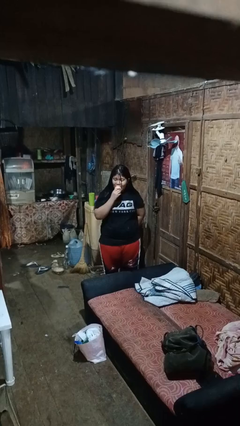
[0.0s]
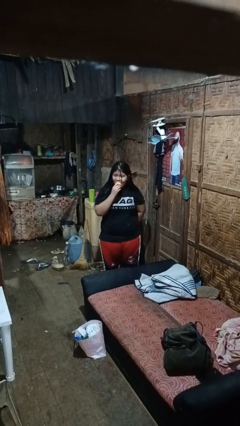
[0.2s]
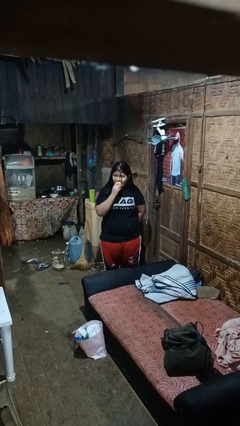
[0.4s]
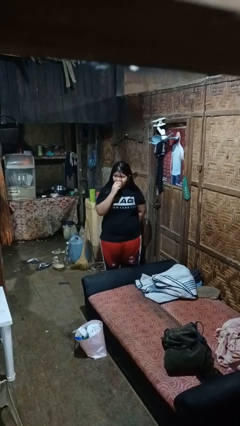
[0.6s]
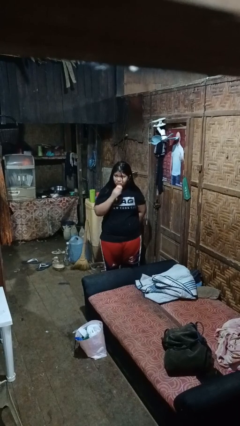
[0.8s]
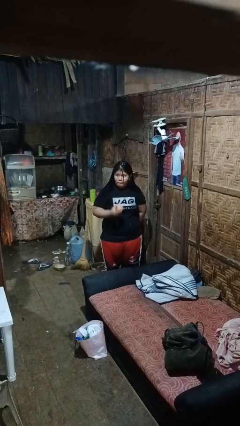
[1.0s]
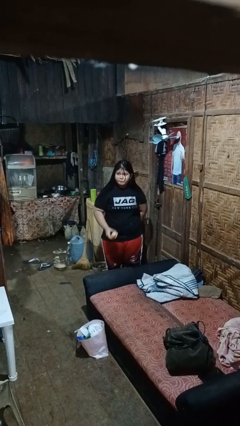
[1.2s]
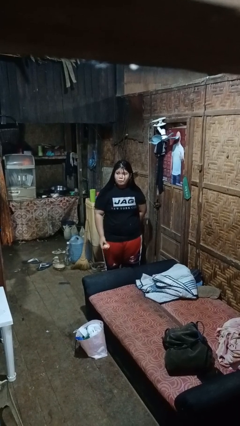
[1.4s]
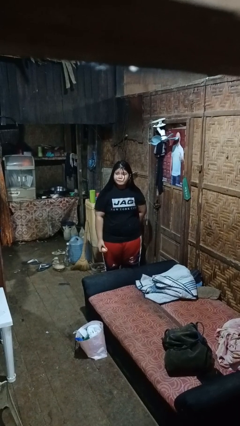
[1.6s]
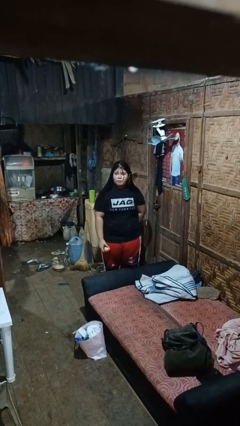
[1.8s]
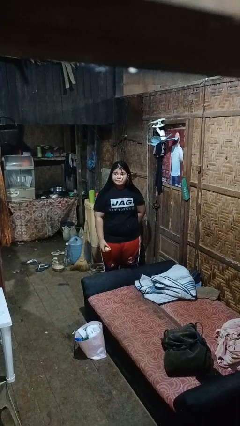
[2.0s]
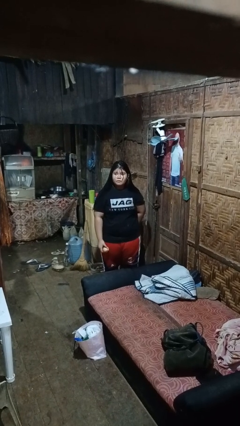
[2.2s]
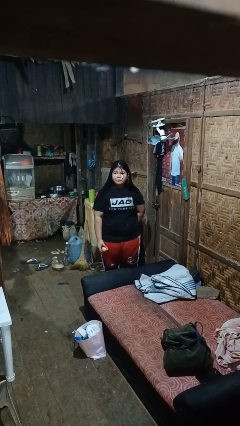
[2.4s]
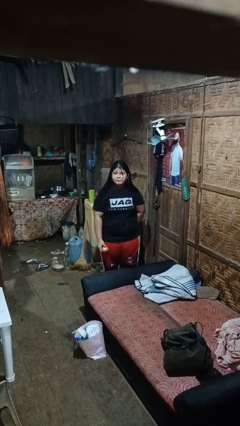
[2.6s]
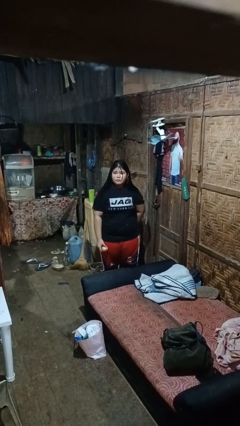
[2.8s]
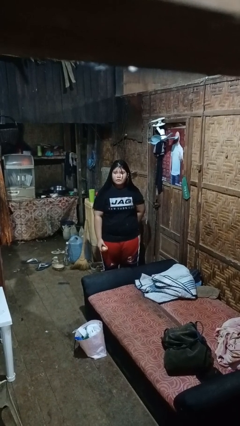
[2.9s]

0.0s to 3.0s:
person eats apple

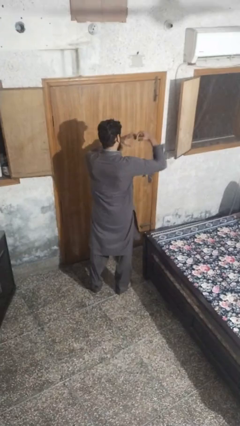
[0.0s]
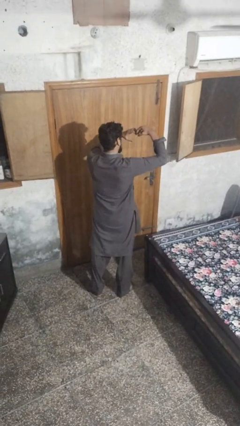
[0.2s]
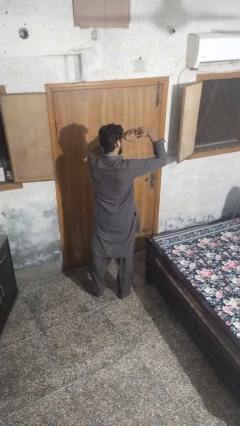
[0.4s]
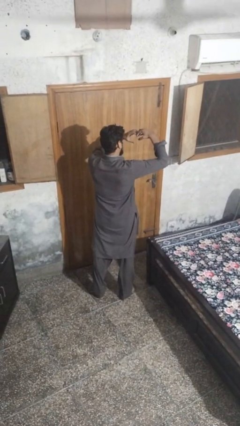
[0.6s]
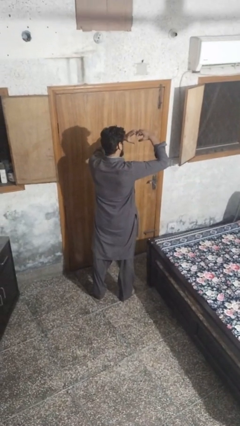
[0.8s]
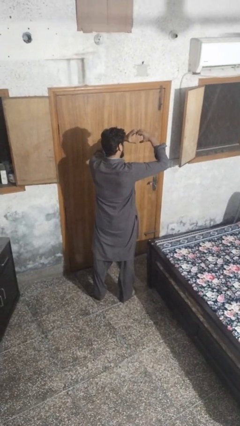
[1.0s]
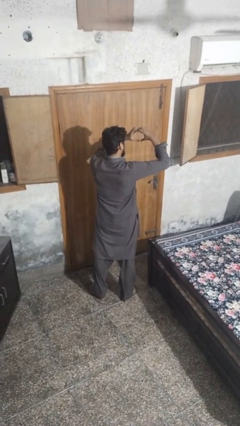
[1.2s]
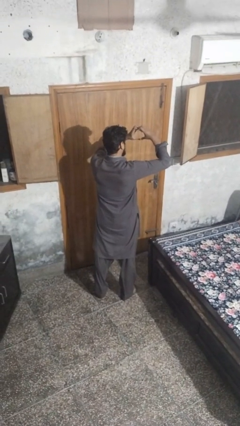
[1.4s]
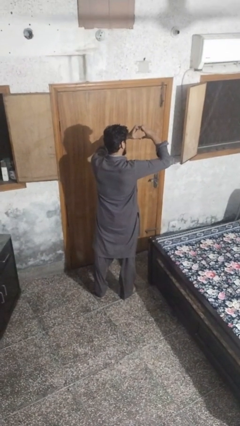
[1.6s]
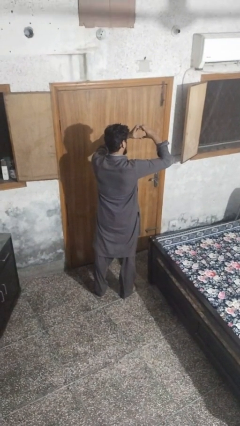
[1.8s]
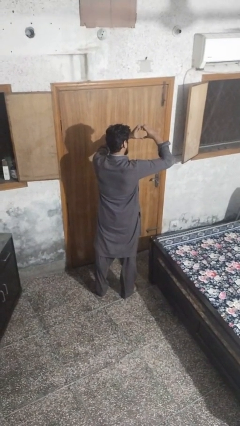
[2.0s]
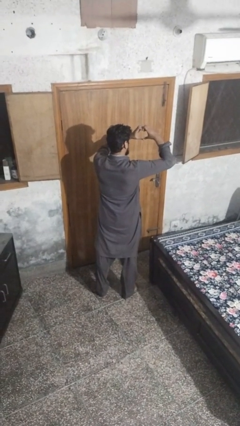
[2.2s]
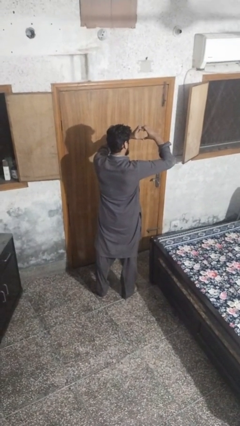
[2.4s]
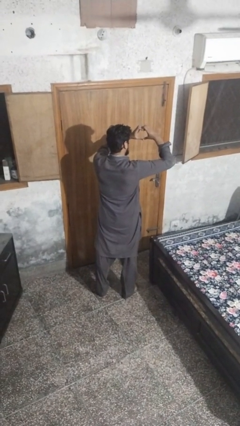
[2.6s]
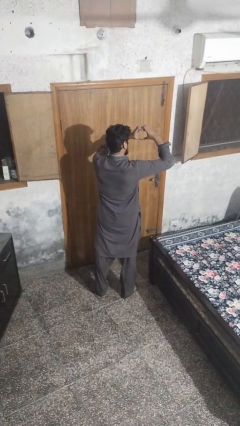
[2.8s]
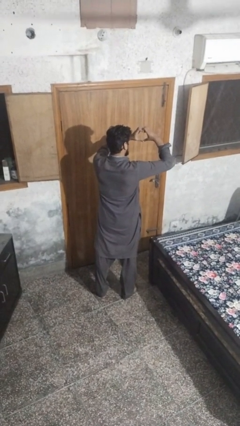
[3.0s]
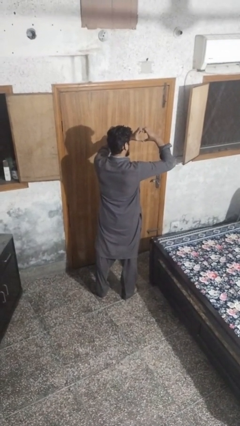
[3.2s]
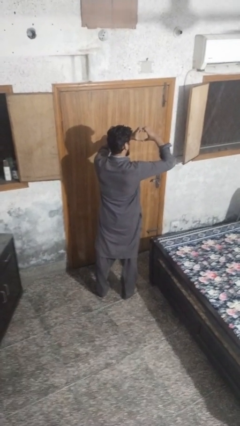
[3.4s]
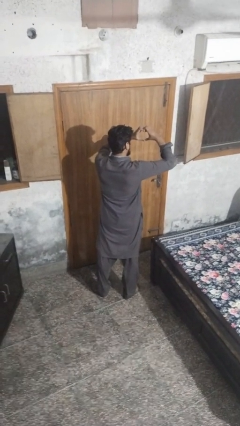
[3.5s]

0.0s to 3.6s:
person gestures heart

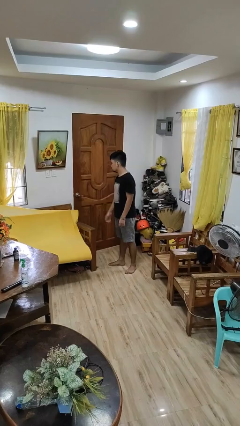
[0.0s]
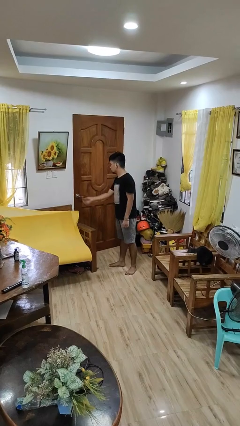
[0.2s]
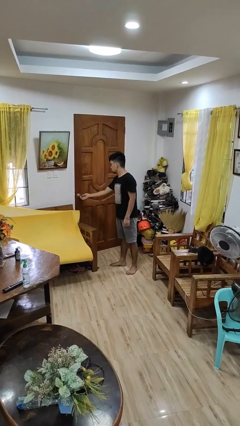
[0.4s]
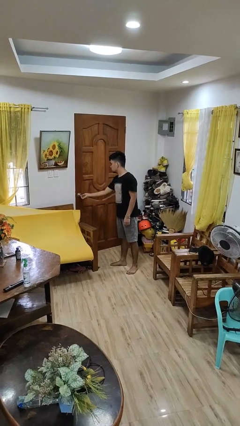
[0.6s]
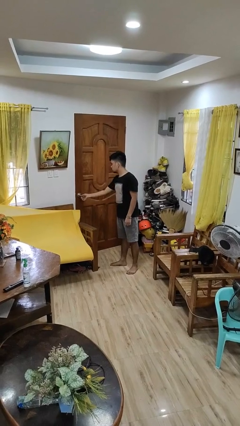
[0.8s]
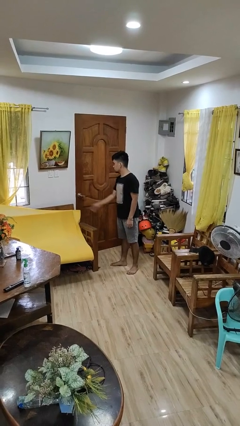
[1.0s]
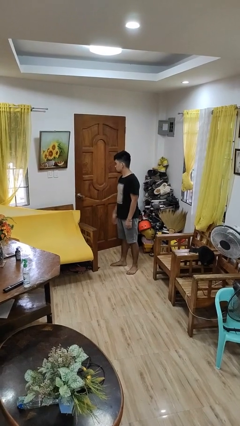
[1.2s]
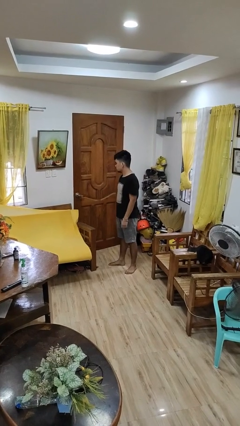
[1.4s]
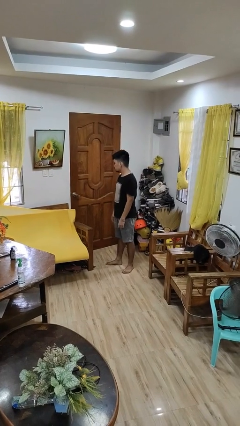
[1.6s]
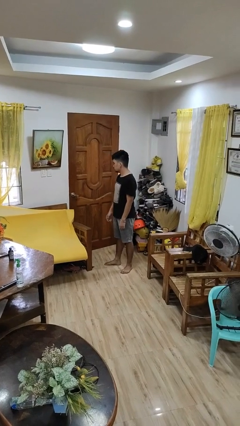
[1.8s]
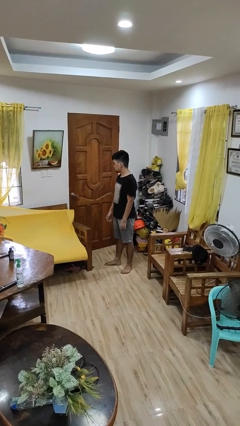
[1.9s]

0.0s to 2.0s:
person locks door with keys

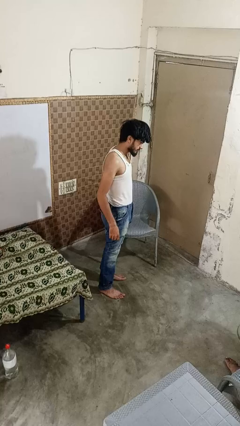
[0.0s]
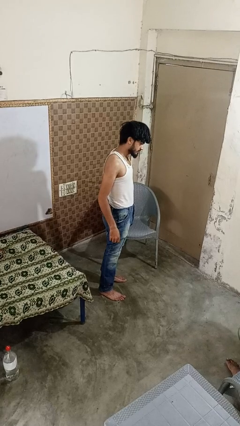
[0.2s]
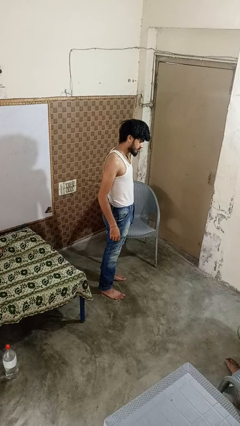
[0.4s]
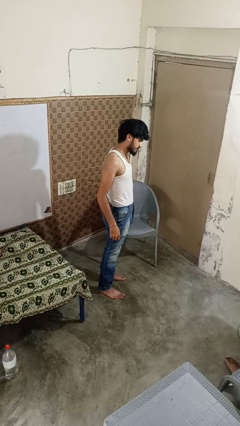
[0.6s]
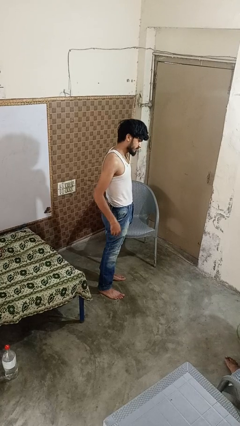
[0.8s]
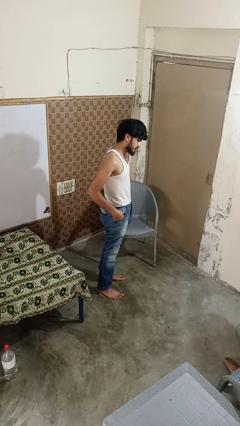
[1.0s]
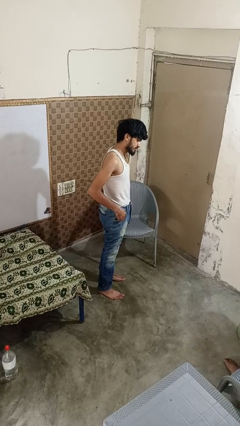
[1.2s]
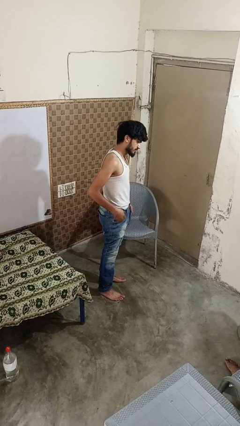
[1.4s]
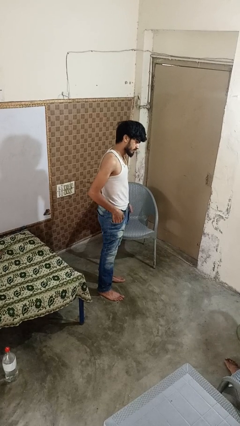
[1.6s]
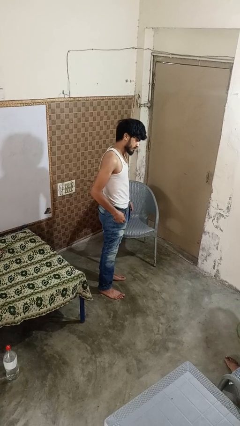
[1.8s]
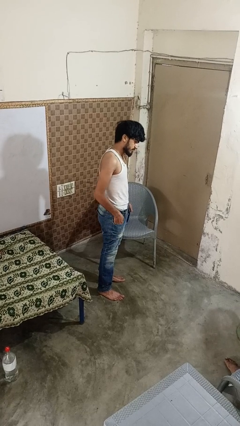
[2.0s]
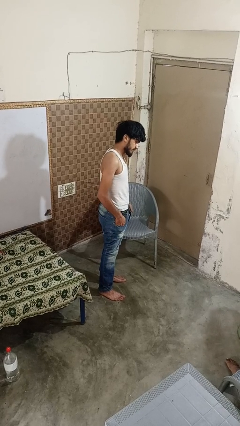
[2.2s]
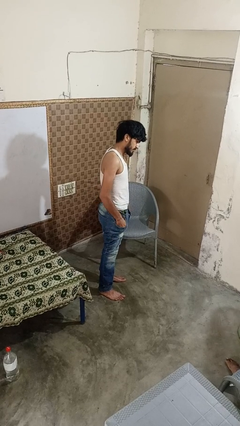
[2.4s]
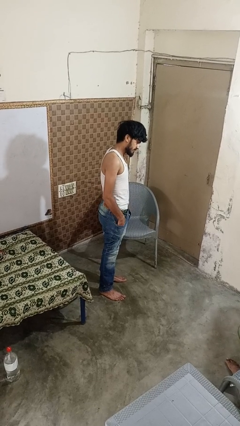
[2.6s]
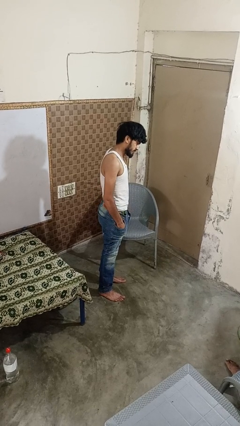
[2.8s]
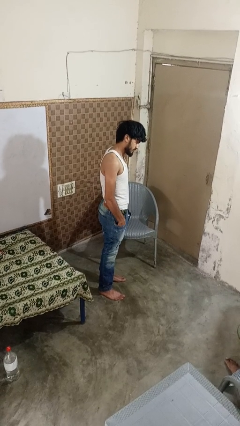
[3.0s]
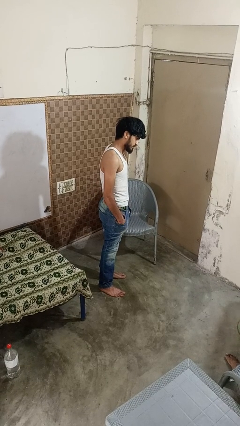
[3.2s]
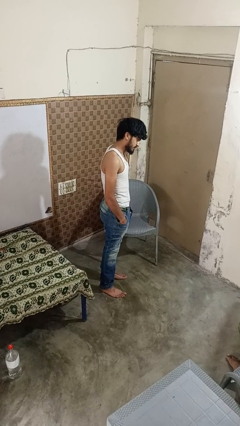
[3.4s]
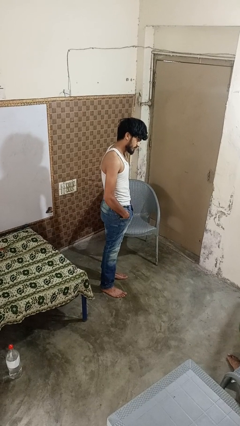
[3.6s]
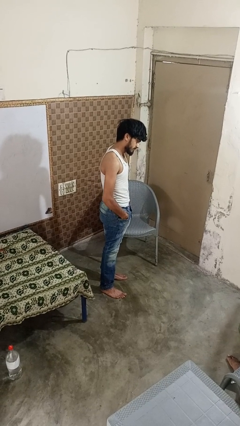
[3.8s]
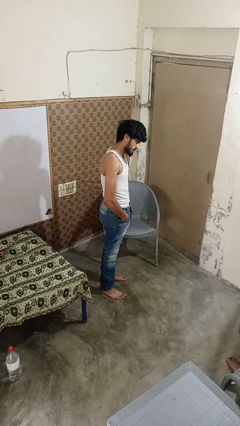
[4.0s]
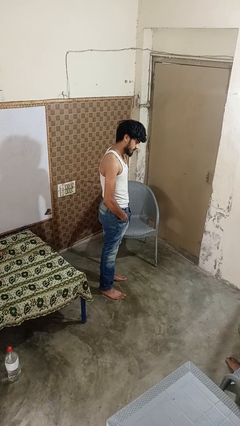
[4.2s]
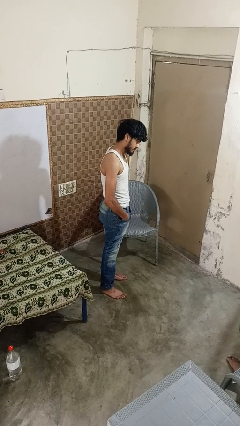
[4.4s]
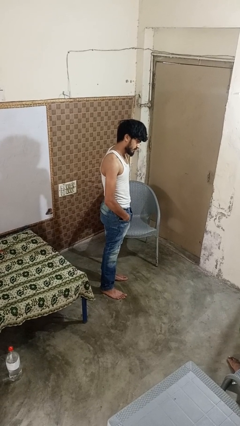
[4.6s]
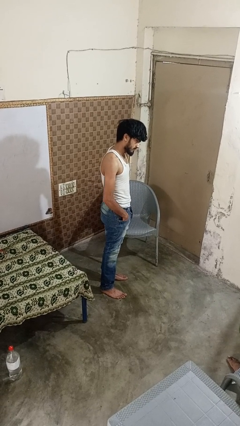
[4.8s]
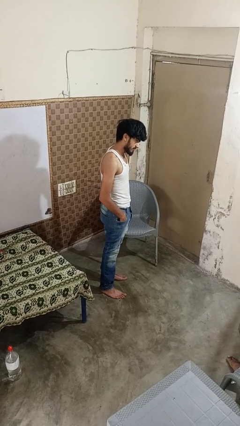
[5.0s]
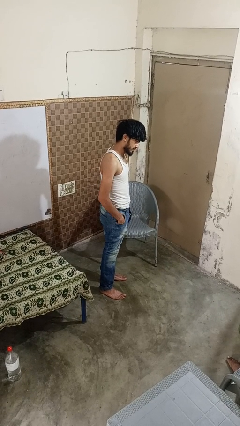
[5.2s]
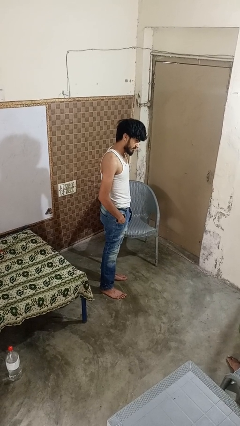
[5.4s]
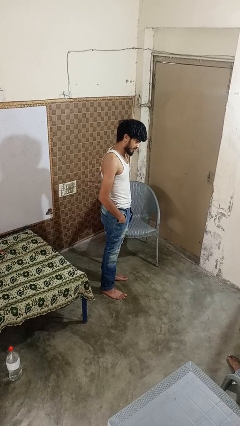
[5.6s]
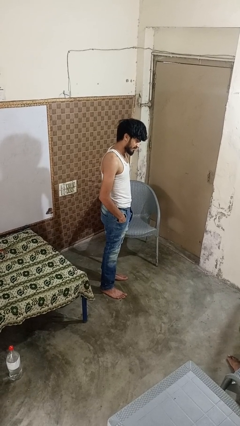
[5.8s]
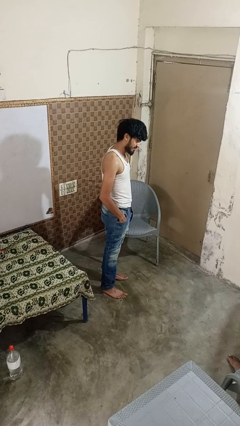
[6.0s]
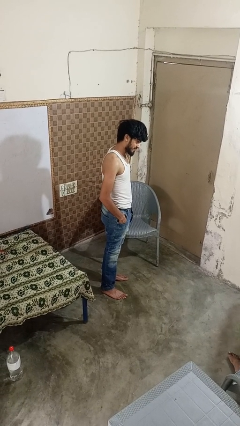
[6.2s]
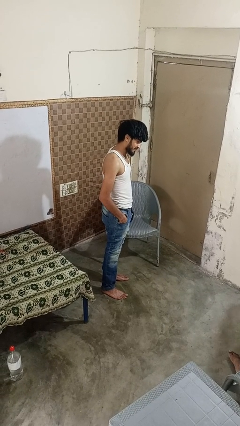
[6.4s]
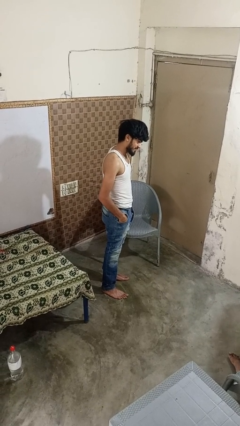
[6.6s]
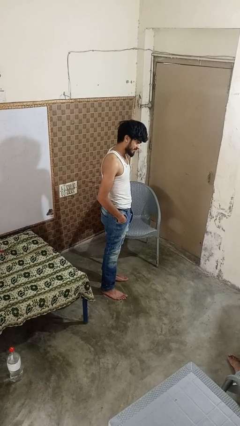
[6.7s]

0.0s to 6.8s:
person puts hands in back pockets

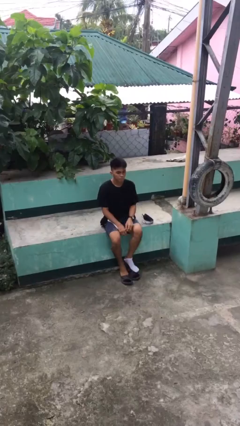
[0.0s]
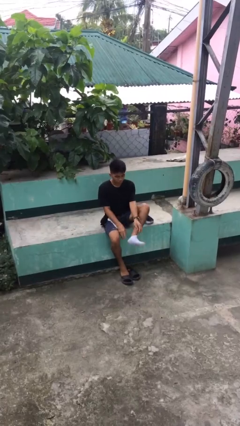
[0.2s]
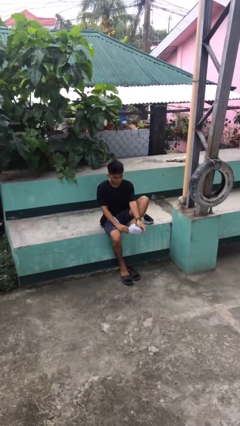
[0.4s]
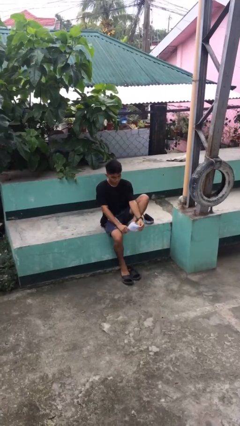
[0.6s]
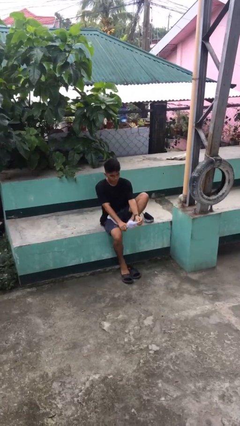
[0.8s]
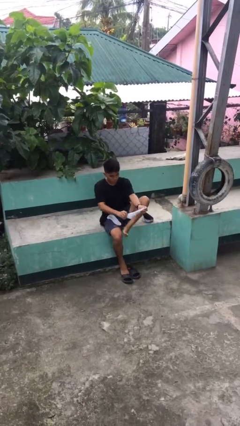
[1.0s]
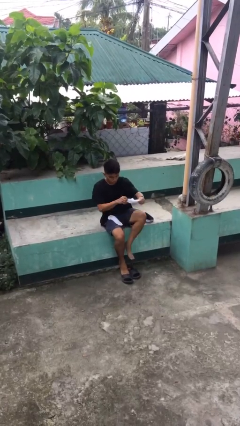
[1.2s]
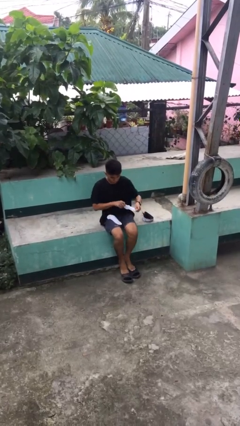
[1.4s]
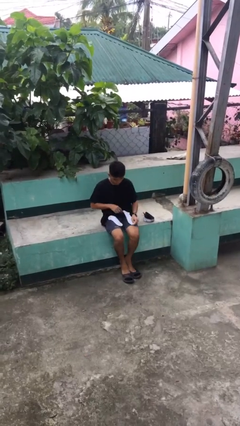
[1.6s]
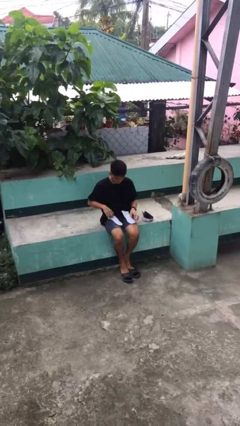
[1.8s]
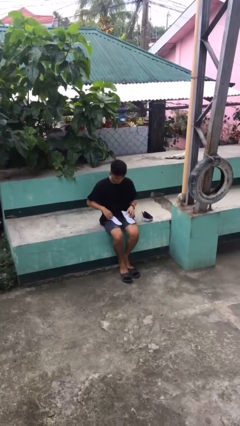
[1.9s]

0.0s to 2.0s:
person takes off socks
